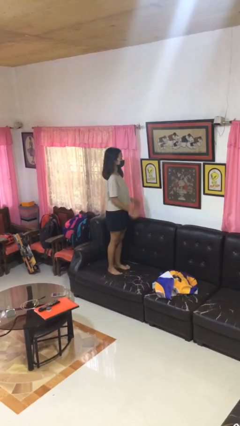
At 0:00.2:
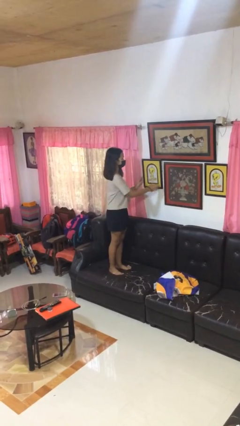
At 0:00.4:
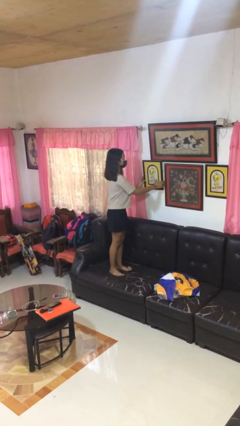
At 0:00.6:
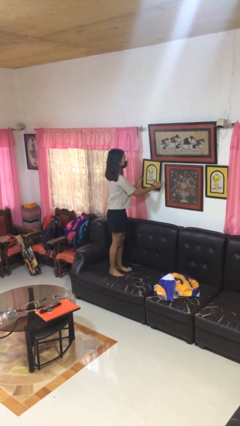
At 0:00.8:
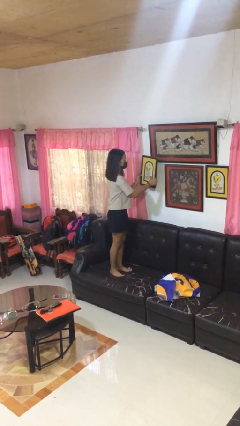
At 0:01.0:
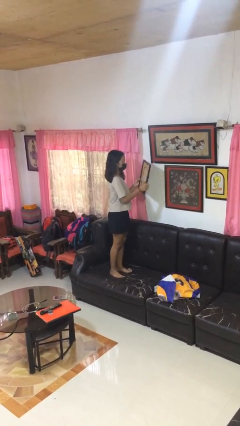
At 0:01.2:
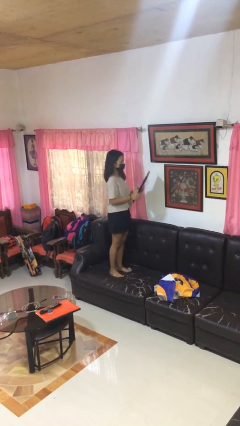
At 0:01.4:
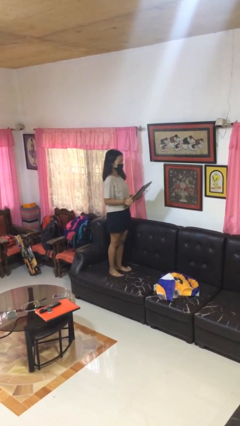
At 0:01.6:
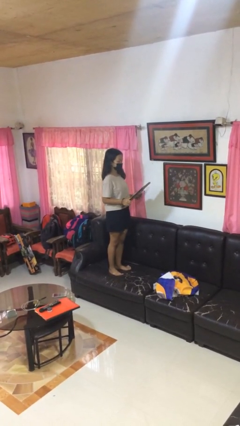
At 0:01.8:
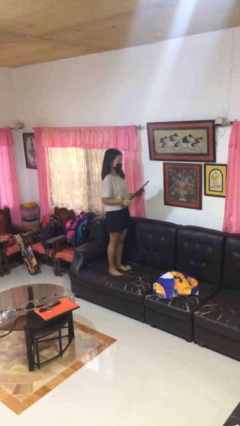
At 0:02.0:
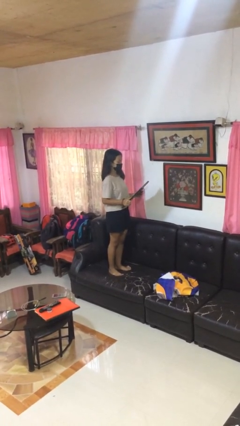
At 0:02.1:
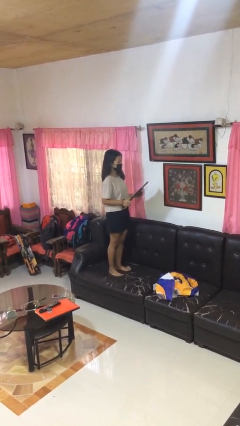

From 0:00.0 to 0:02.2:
person takes down picture frame

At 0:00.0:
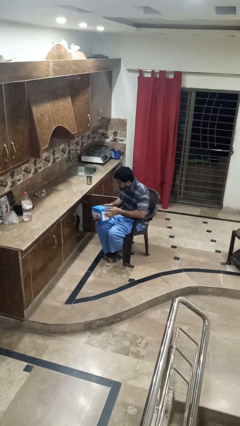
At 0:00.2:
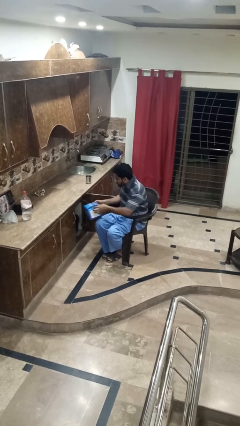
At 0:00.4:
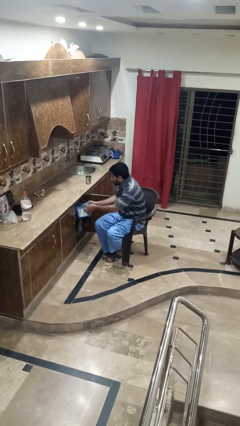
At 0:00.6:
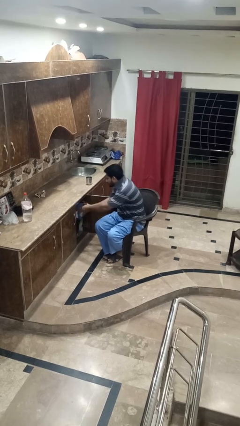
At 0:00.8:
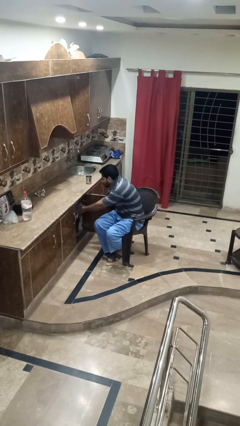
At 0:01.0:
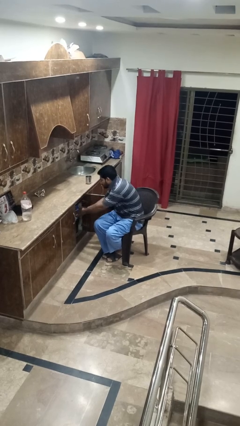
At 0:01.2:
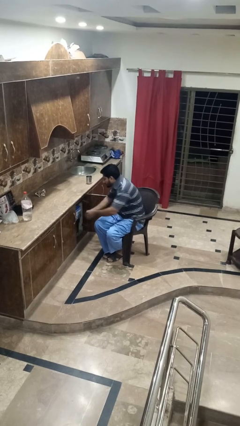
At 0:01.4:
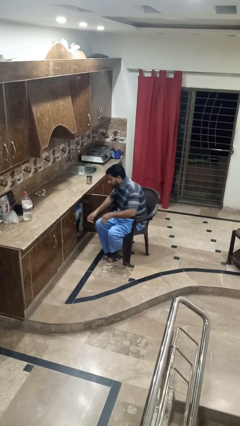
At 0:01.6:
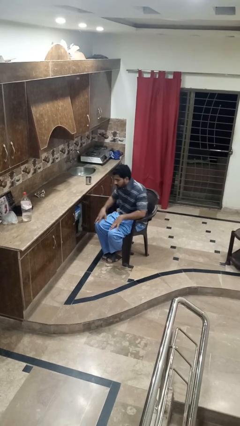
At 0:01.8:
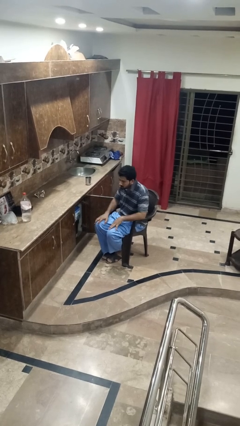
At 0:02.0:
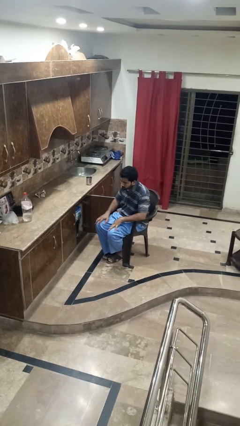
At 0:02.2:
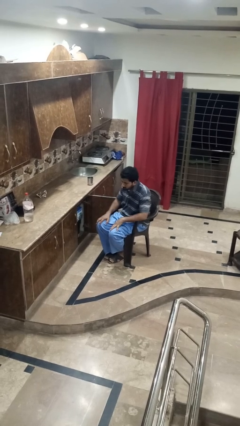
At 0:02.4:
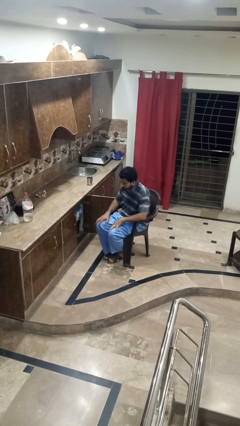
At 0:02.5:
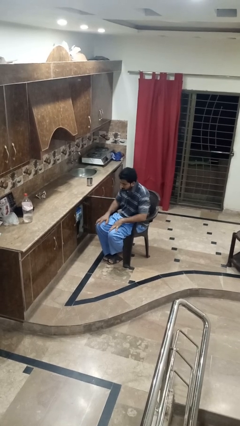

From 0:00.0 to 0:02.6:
person puts down object into cabinet

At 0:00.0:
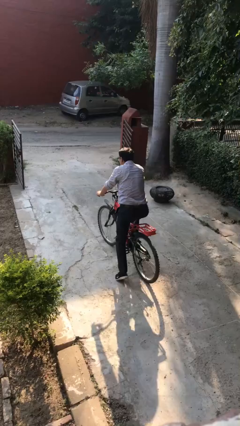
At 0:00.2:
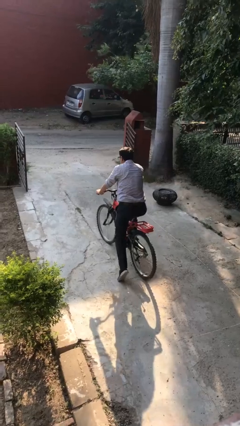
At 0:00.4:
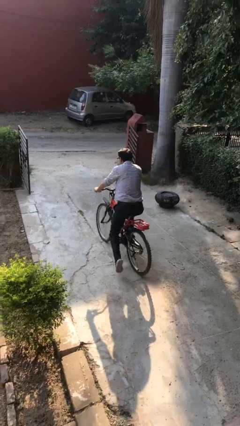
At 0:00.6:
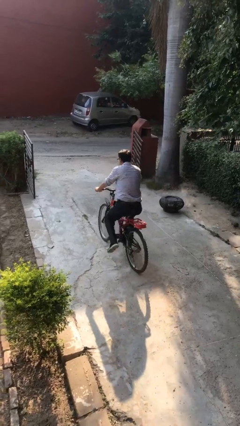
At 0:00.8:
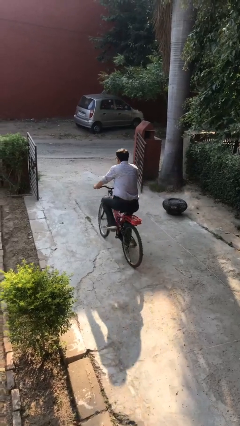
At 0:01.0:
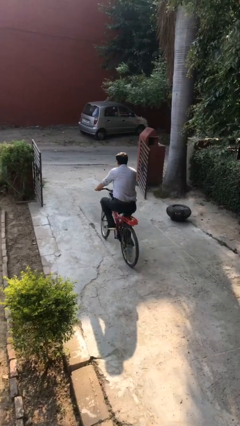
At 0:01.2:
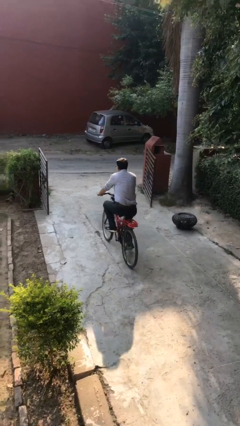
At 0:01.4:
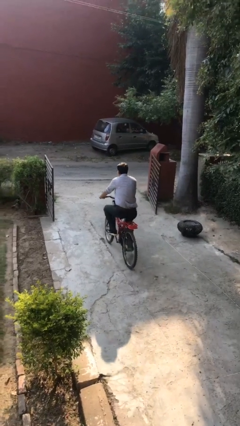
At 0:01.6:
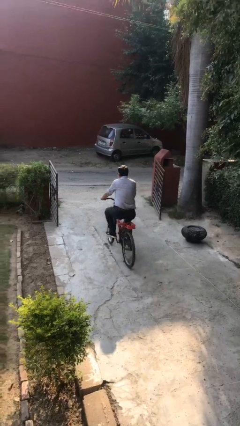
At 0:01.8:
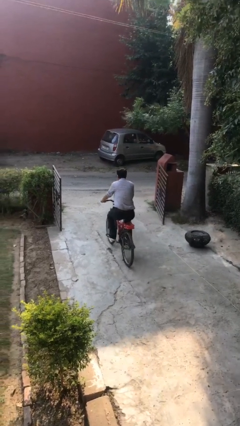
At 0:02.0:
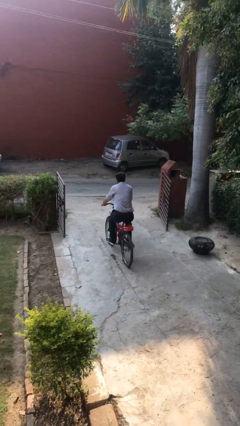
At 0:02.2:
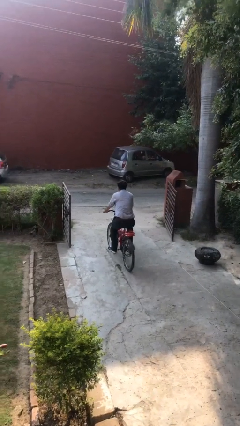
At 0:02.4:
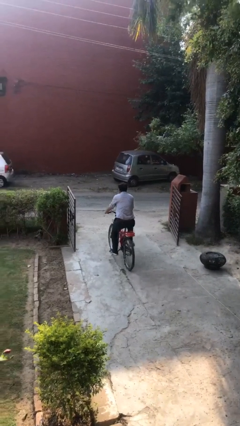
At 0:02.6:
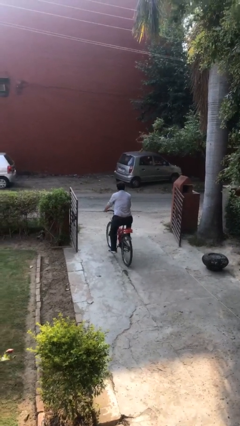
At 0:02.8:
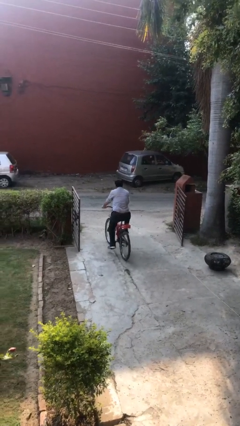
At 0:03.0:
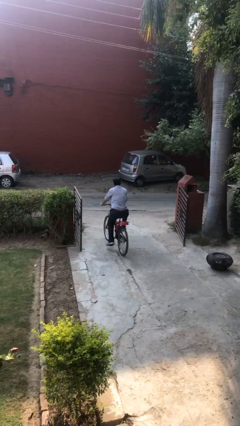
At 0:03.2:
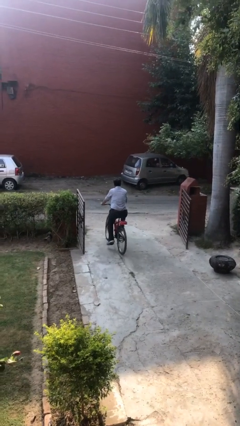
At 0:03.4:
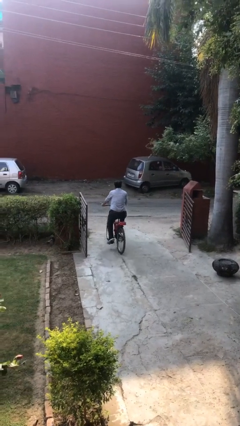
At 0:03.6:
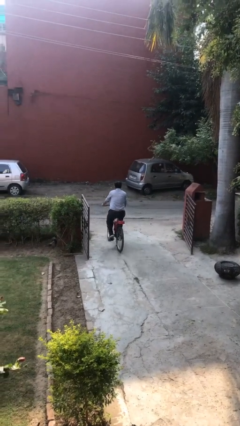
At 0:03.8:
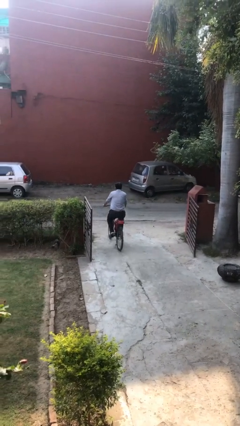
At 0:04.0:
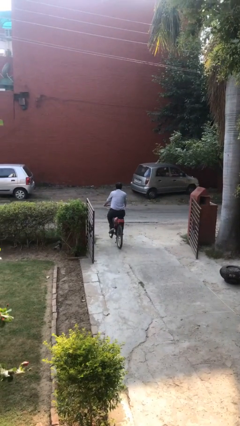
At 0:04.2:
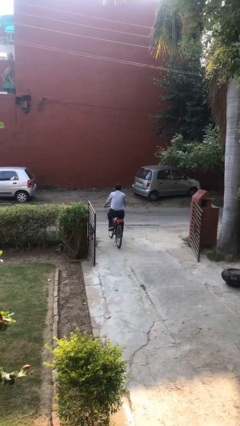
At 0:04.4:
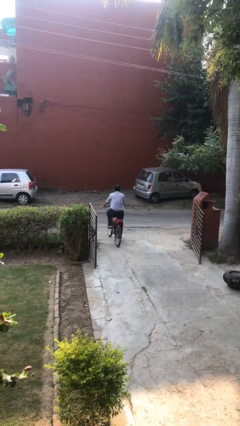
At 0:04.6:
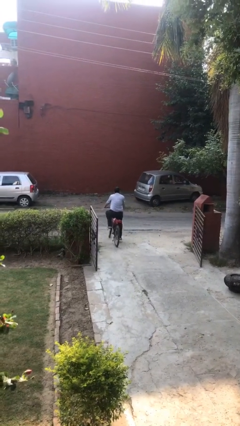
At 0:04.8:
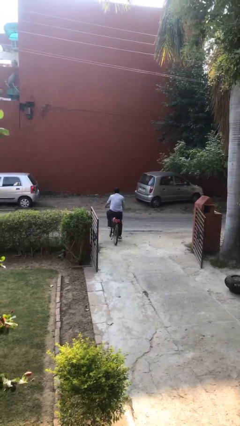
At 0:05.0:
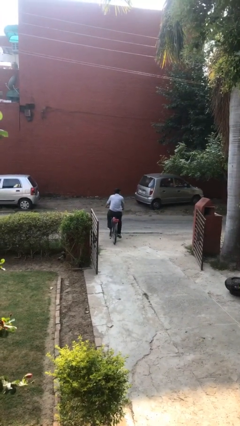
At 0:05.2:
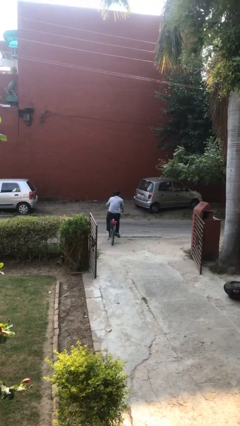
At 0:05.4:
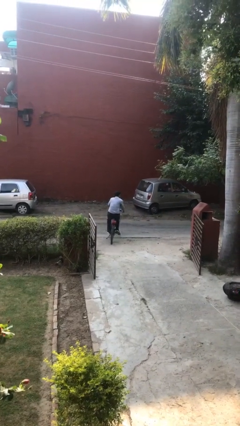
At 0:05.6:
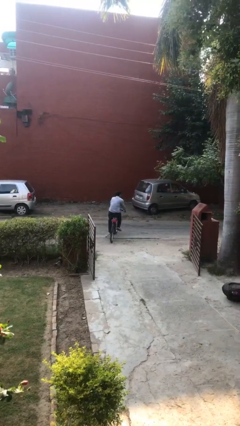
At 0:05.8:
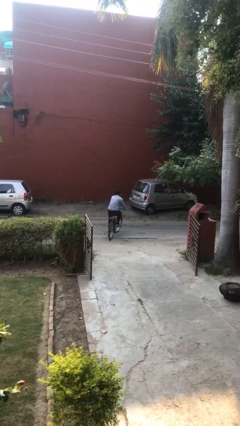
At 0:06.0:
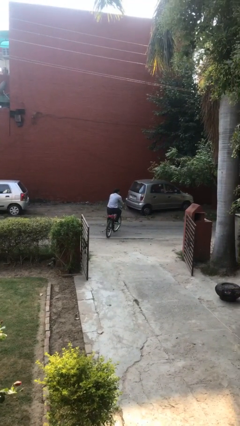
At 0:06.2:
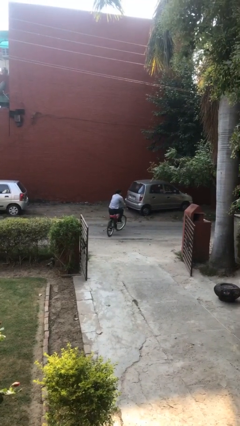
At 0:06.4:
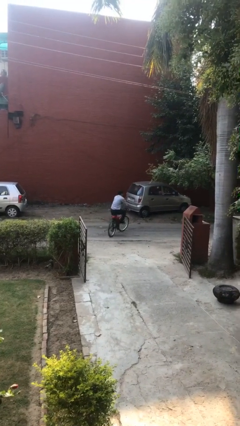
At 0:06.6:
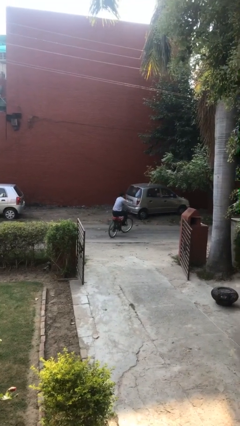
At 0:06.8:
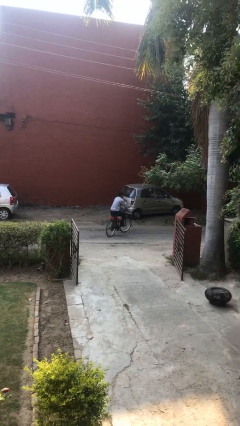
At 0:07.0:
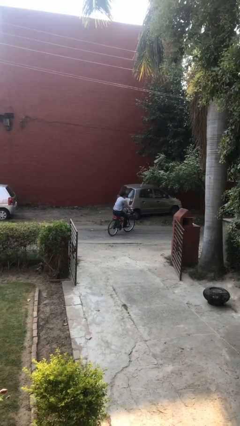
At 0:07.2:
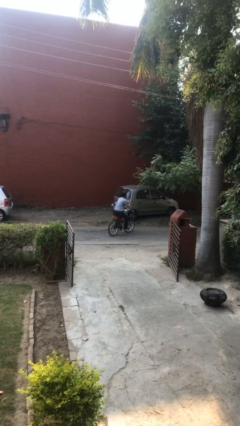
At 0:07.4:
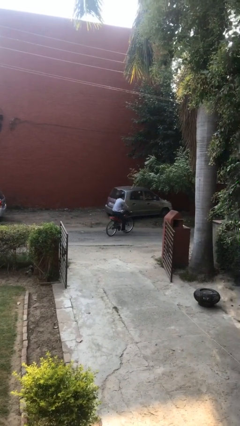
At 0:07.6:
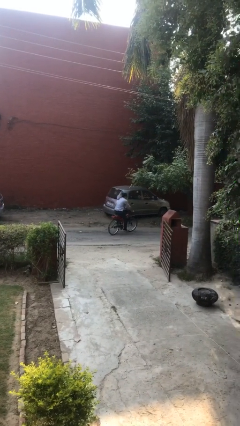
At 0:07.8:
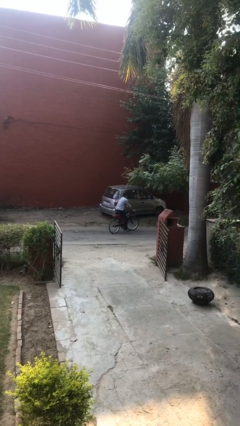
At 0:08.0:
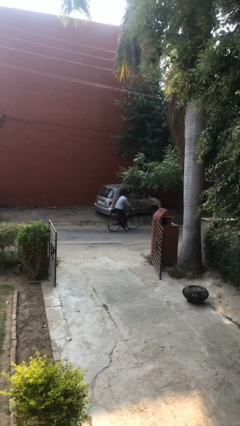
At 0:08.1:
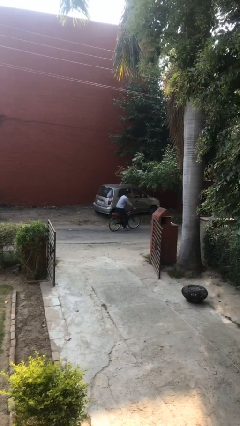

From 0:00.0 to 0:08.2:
person rides bicycle

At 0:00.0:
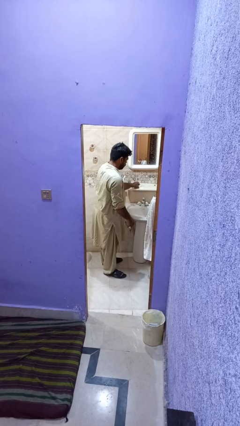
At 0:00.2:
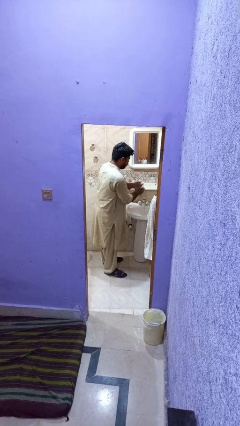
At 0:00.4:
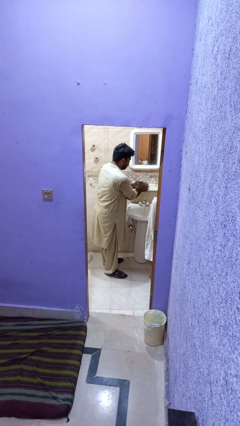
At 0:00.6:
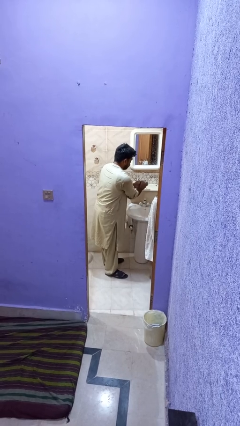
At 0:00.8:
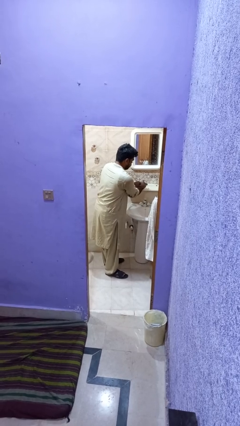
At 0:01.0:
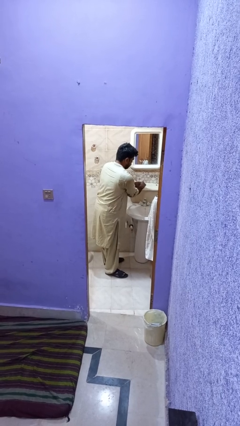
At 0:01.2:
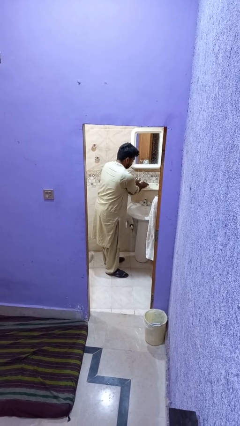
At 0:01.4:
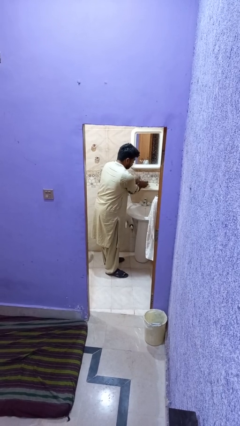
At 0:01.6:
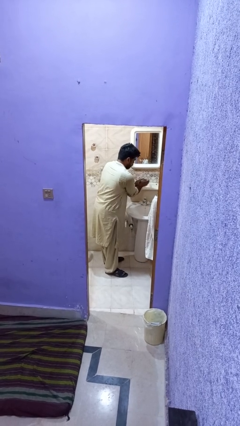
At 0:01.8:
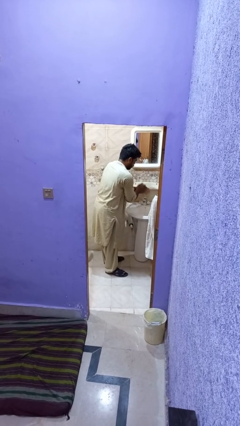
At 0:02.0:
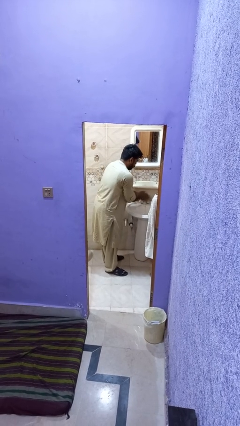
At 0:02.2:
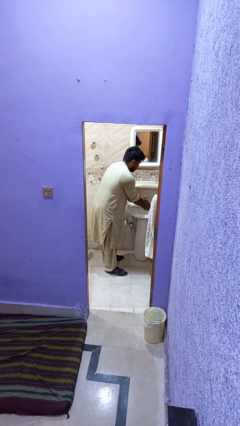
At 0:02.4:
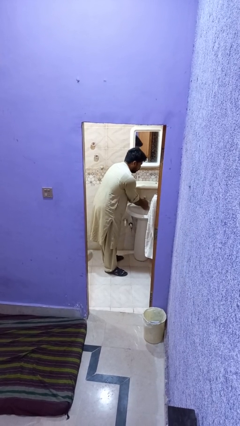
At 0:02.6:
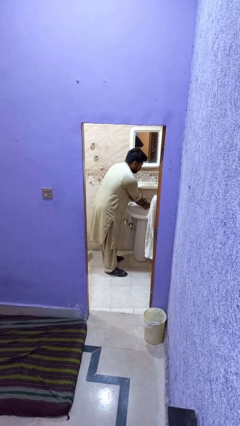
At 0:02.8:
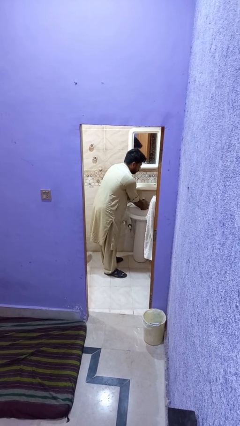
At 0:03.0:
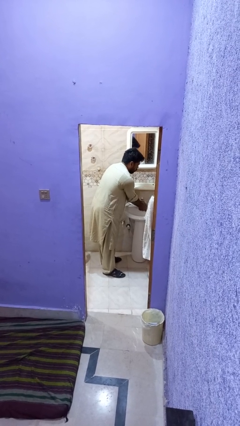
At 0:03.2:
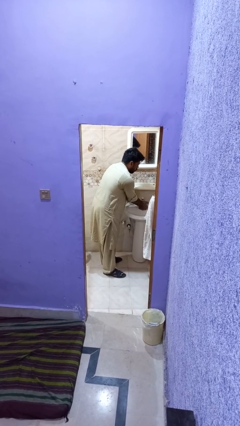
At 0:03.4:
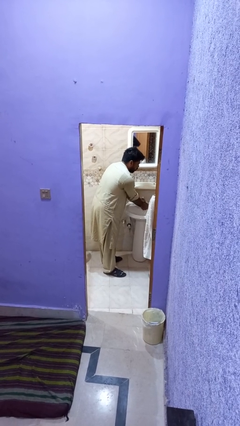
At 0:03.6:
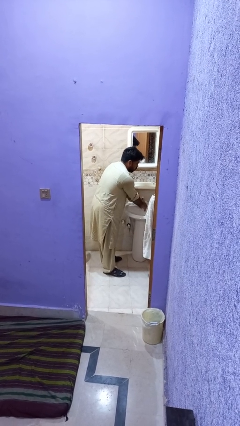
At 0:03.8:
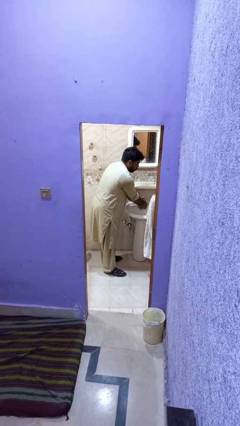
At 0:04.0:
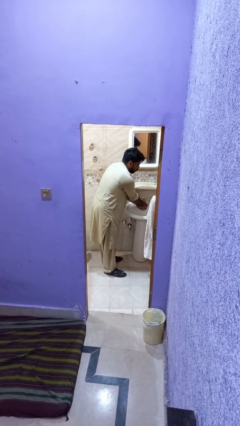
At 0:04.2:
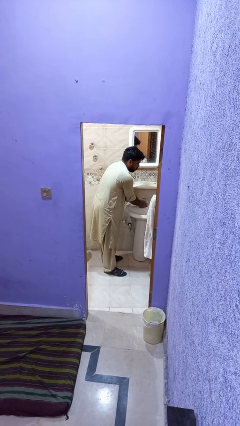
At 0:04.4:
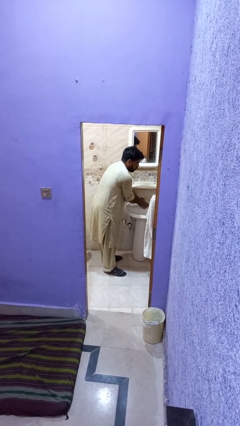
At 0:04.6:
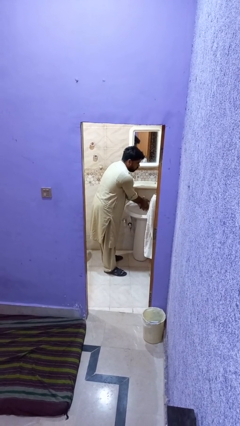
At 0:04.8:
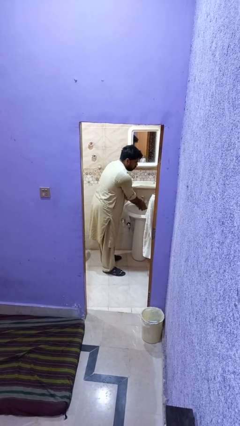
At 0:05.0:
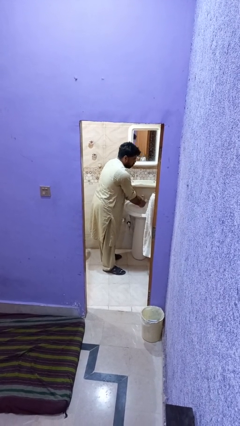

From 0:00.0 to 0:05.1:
person washes hands
